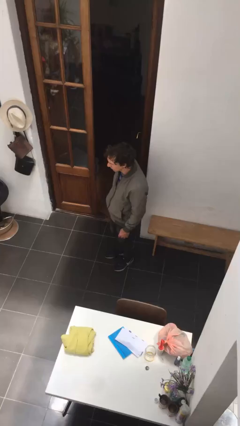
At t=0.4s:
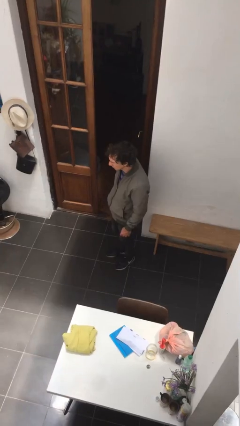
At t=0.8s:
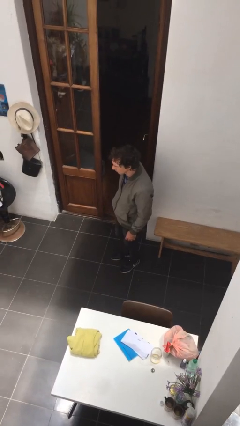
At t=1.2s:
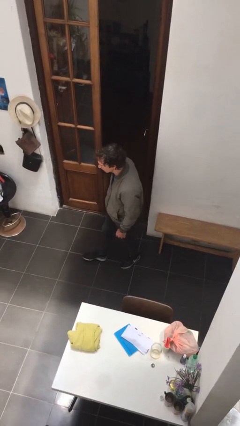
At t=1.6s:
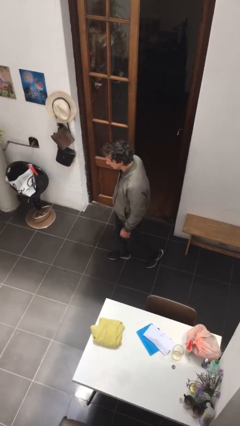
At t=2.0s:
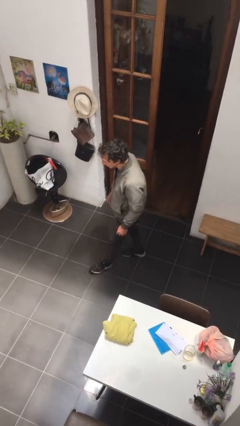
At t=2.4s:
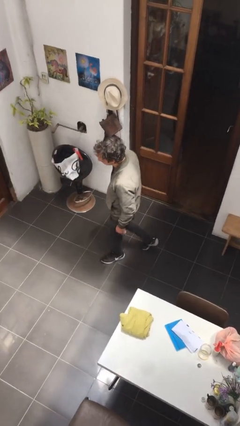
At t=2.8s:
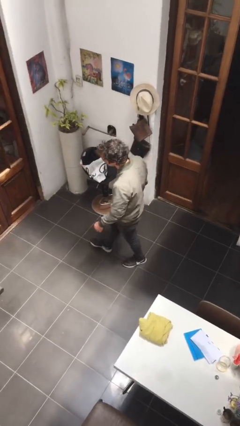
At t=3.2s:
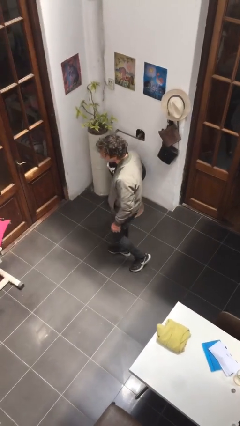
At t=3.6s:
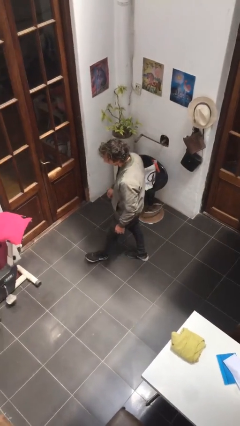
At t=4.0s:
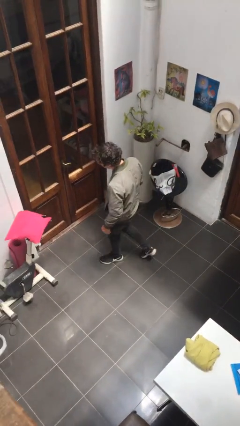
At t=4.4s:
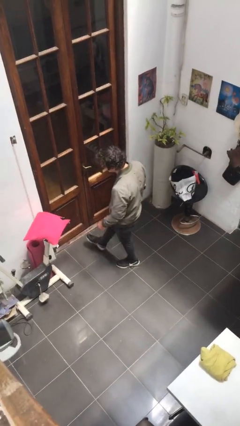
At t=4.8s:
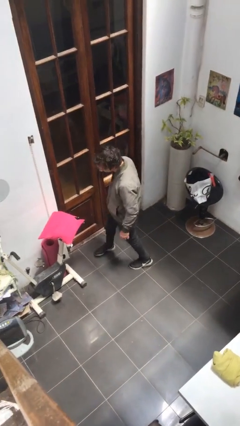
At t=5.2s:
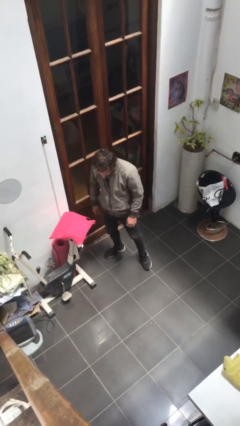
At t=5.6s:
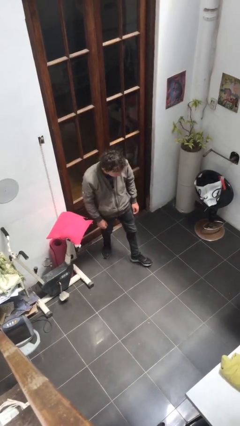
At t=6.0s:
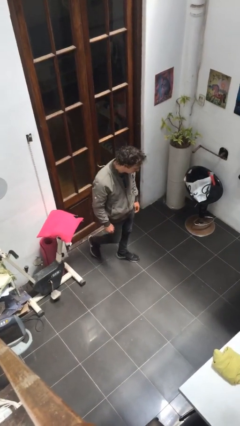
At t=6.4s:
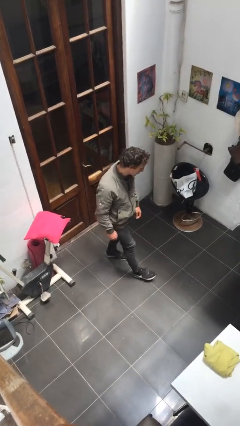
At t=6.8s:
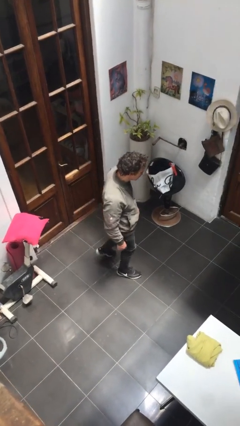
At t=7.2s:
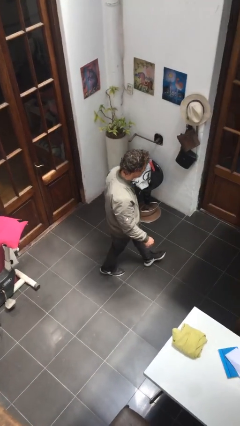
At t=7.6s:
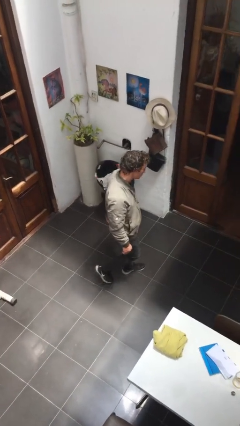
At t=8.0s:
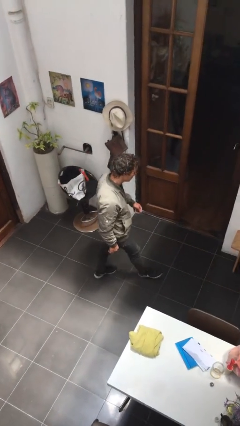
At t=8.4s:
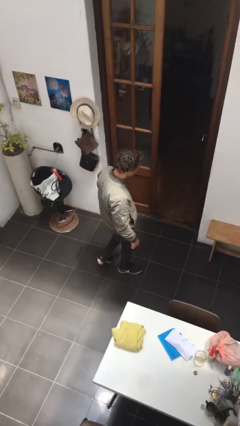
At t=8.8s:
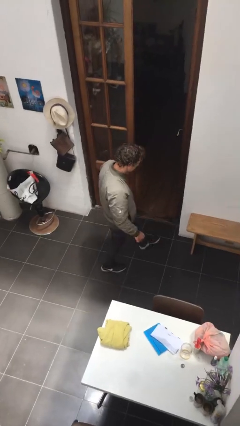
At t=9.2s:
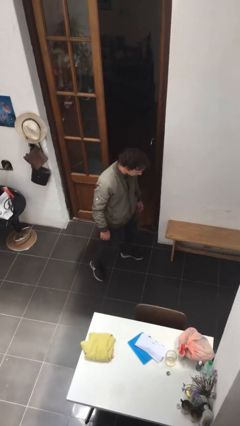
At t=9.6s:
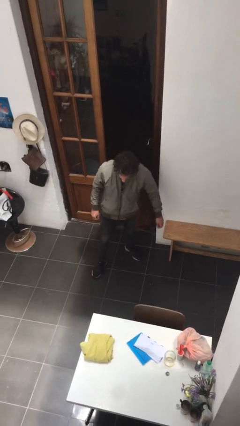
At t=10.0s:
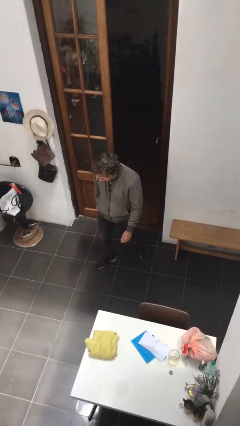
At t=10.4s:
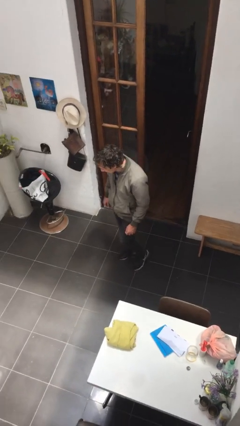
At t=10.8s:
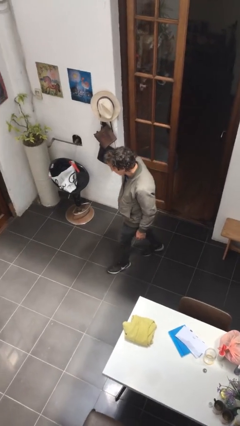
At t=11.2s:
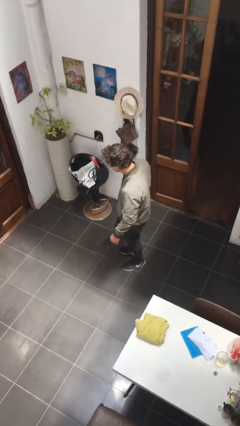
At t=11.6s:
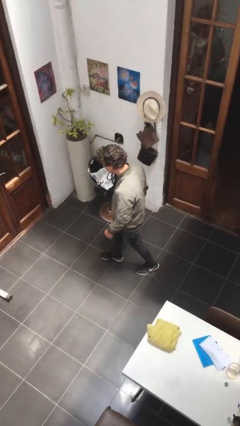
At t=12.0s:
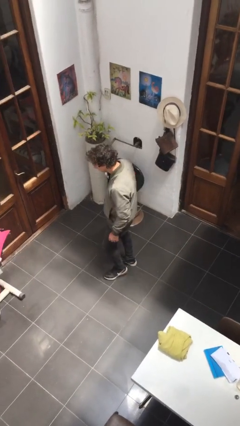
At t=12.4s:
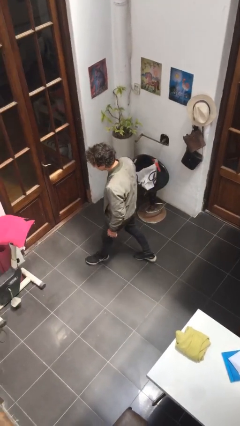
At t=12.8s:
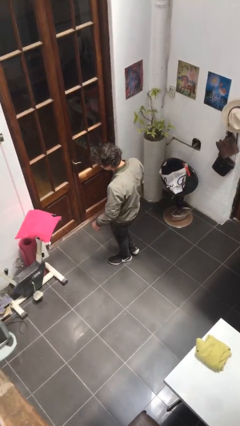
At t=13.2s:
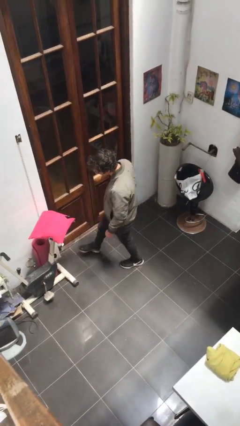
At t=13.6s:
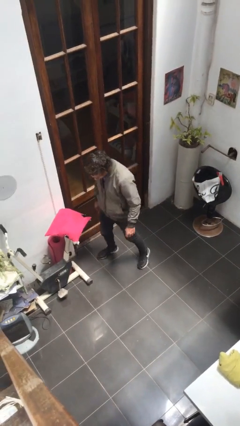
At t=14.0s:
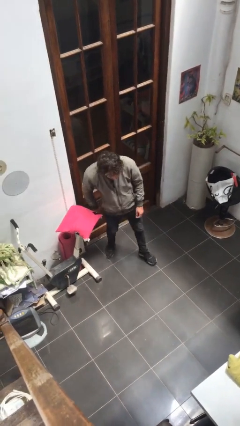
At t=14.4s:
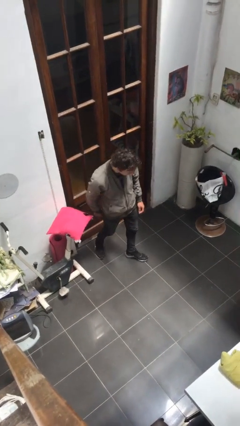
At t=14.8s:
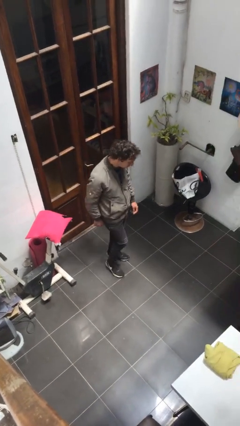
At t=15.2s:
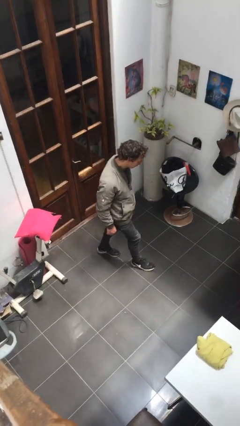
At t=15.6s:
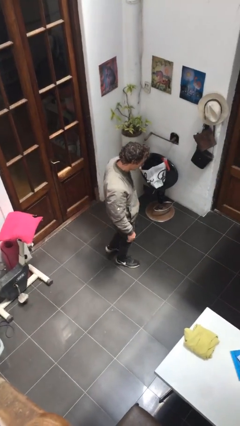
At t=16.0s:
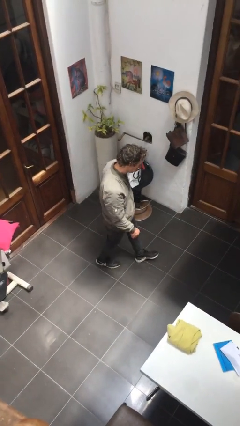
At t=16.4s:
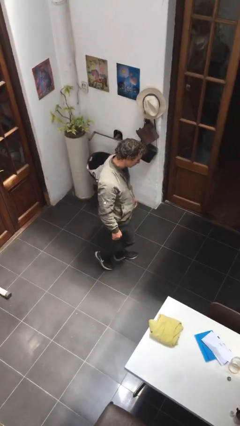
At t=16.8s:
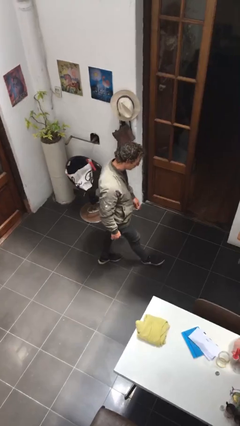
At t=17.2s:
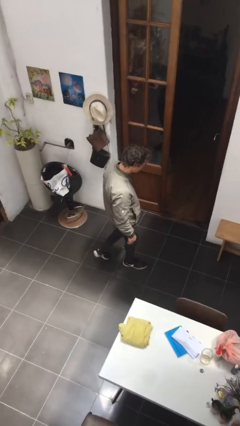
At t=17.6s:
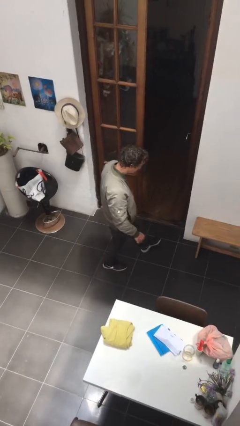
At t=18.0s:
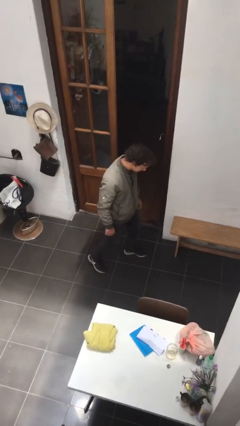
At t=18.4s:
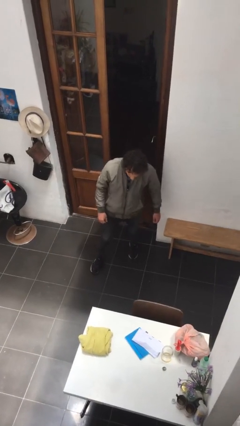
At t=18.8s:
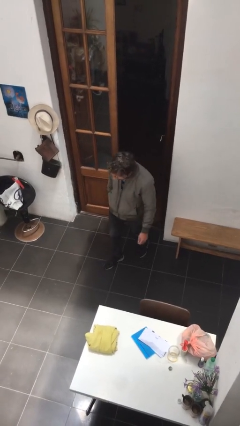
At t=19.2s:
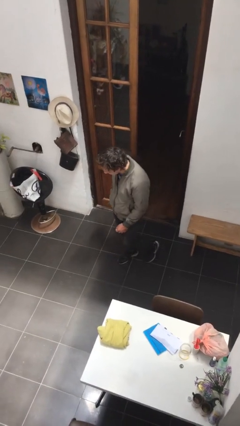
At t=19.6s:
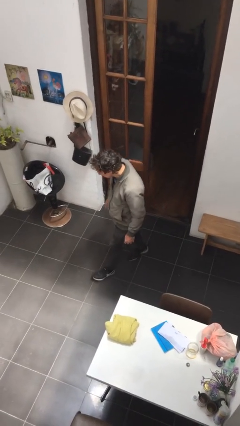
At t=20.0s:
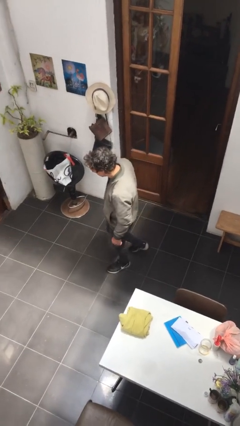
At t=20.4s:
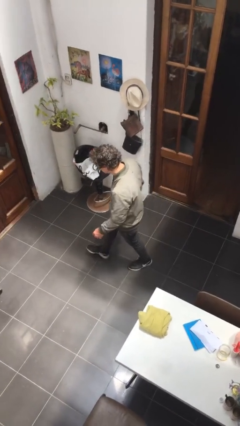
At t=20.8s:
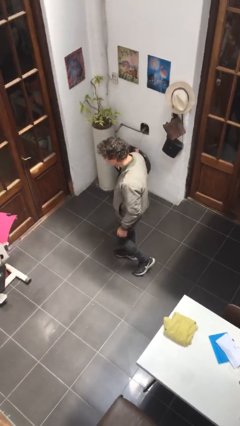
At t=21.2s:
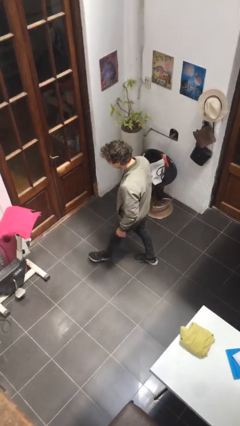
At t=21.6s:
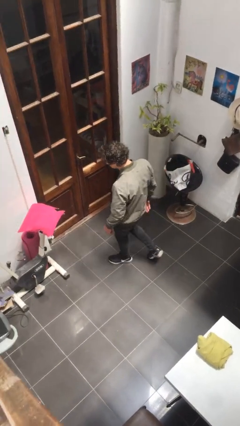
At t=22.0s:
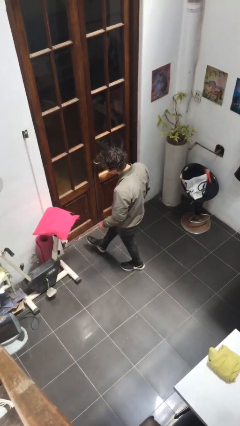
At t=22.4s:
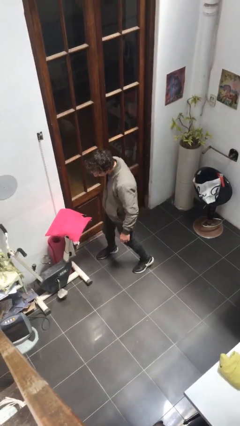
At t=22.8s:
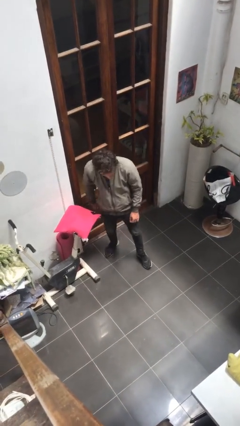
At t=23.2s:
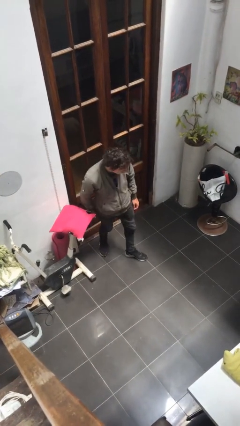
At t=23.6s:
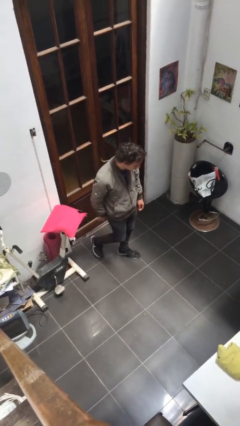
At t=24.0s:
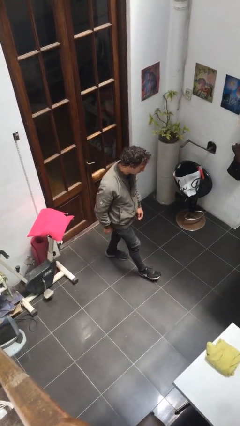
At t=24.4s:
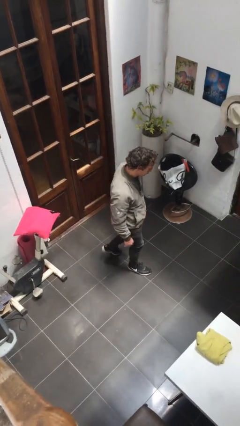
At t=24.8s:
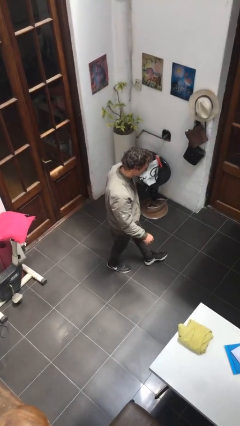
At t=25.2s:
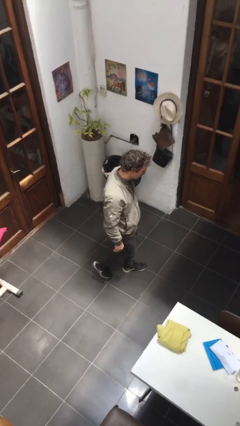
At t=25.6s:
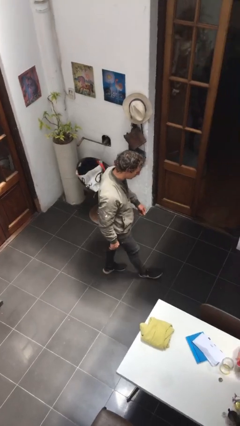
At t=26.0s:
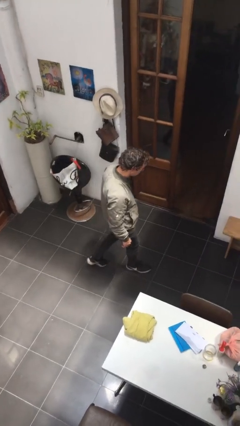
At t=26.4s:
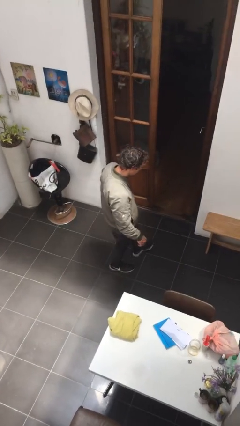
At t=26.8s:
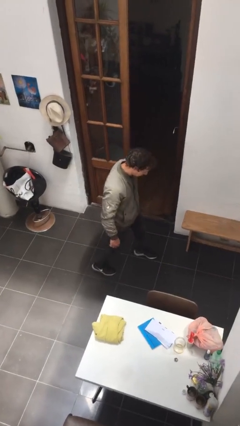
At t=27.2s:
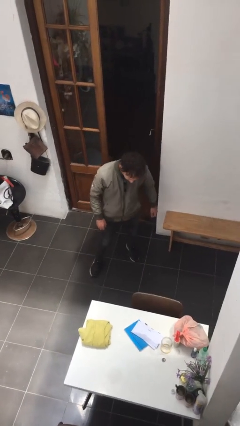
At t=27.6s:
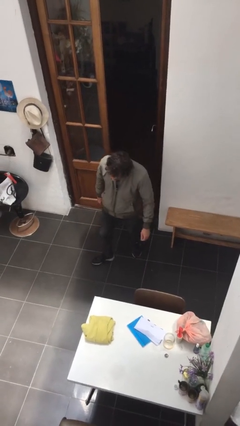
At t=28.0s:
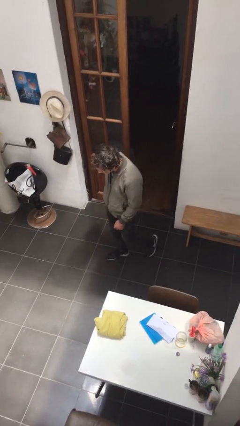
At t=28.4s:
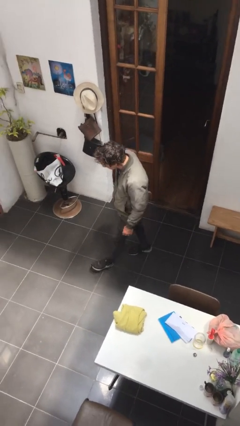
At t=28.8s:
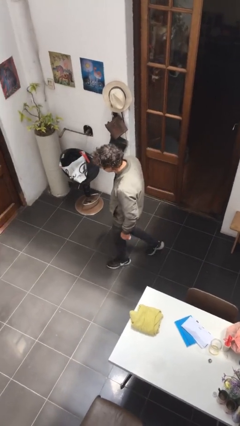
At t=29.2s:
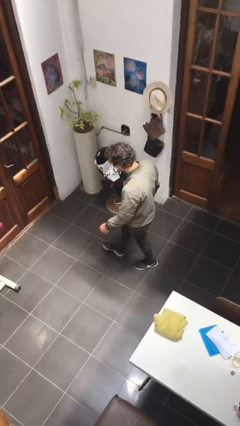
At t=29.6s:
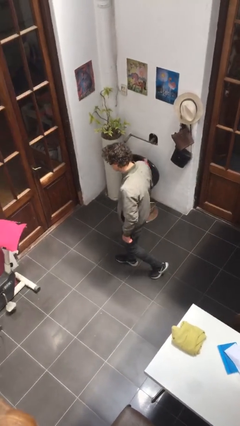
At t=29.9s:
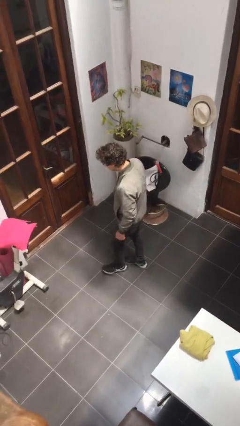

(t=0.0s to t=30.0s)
person walks

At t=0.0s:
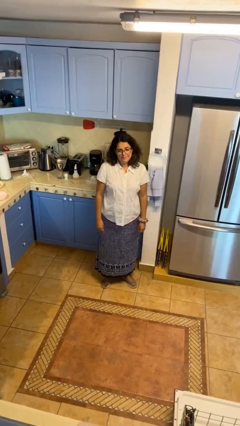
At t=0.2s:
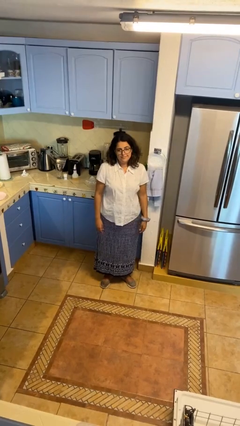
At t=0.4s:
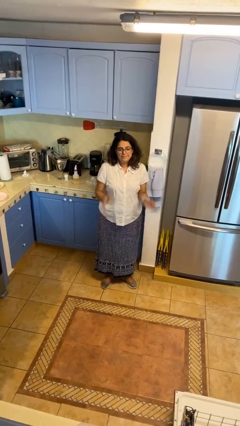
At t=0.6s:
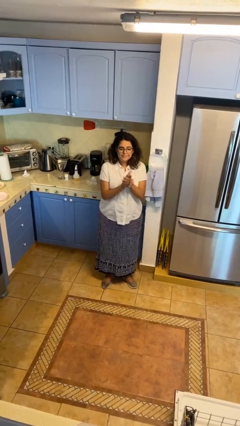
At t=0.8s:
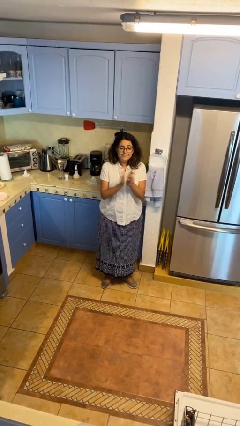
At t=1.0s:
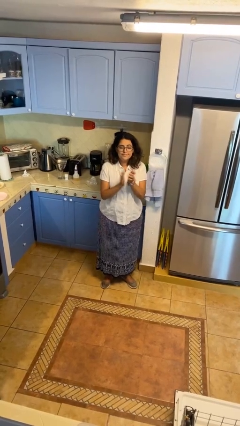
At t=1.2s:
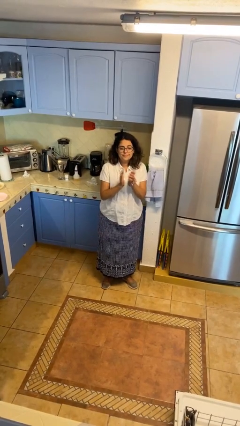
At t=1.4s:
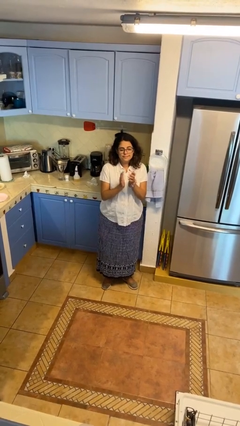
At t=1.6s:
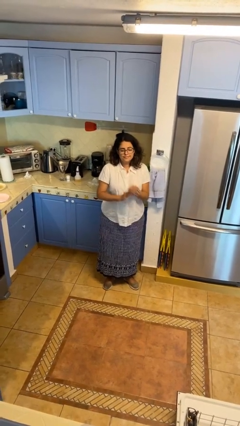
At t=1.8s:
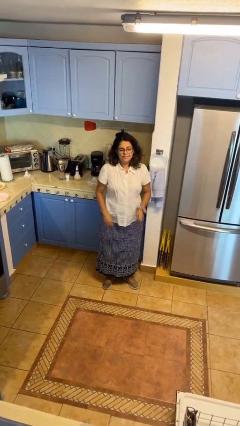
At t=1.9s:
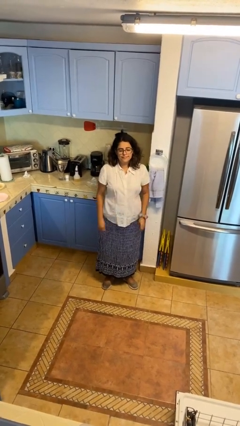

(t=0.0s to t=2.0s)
person claps hands

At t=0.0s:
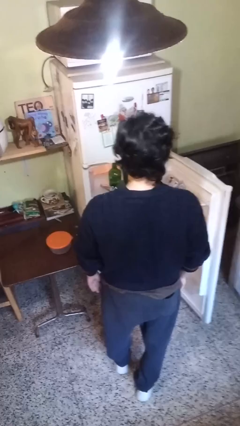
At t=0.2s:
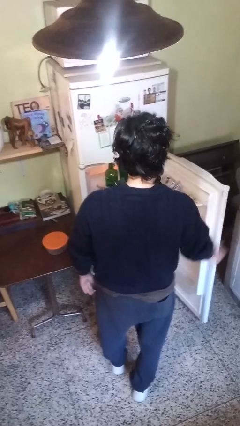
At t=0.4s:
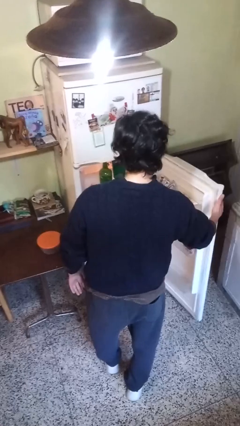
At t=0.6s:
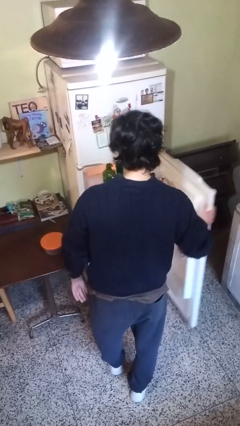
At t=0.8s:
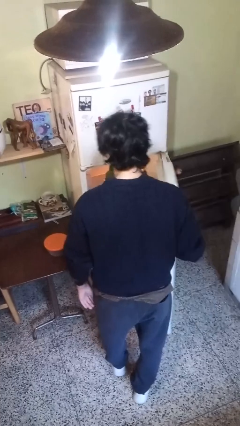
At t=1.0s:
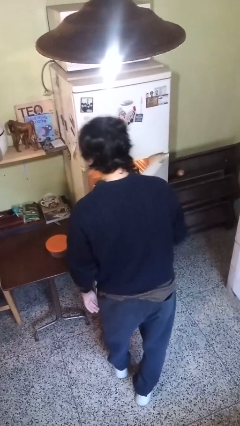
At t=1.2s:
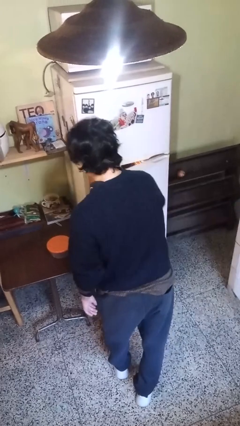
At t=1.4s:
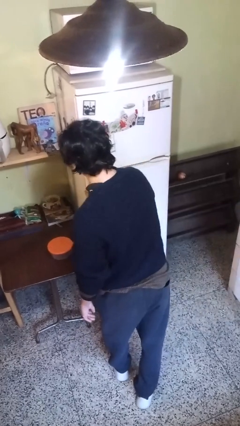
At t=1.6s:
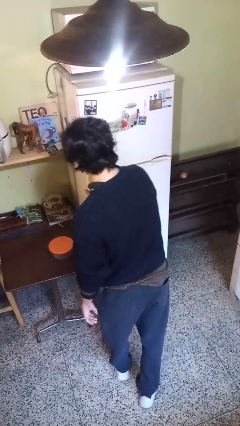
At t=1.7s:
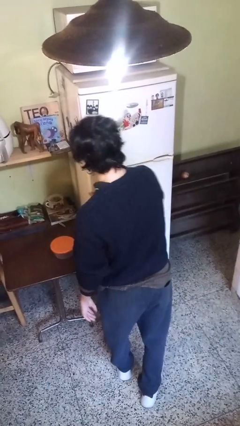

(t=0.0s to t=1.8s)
person closes refrigerator
